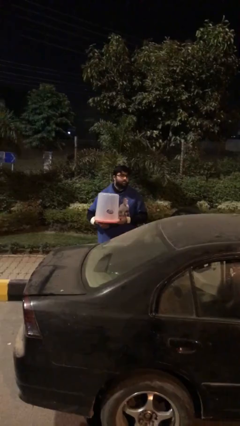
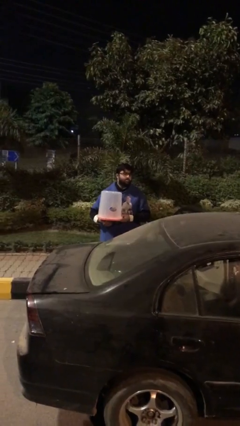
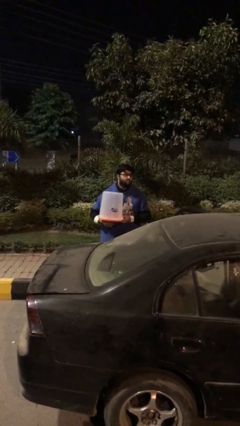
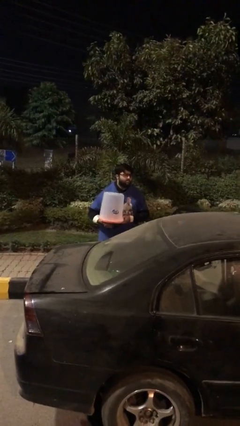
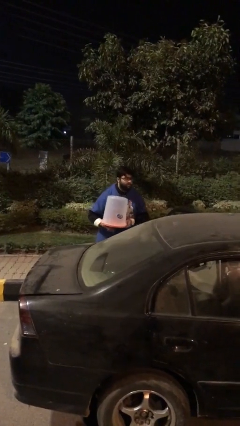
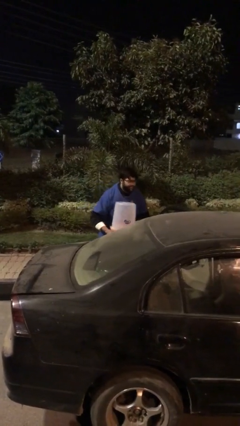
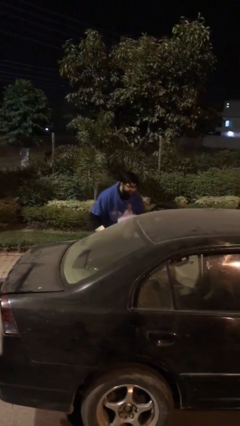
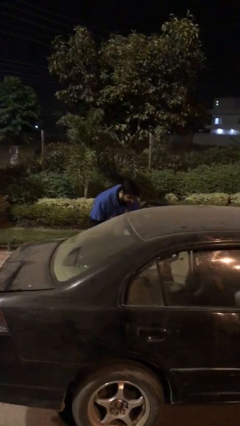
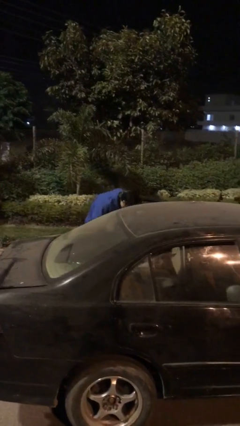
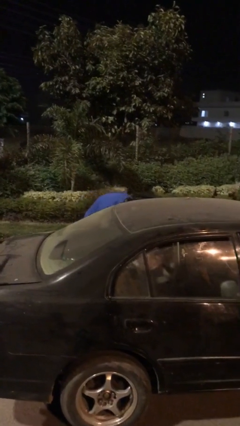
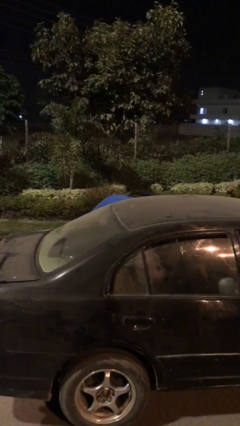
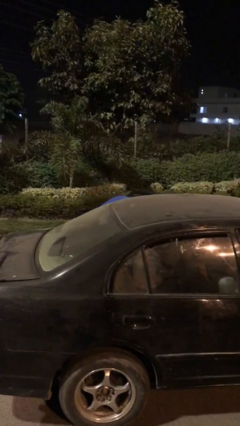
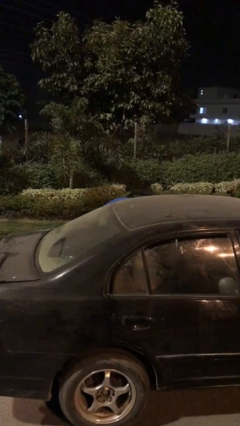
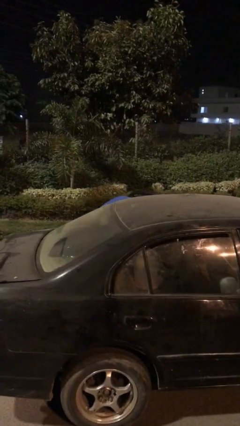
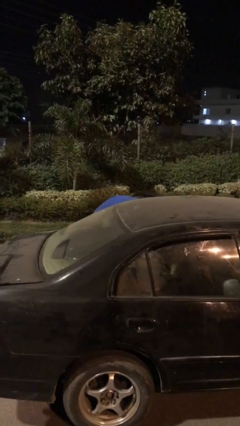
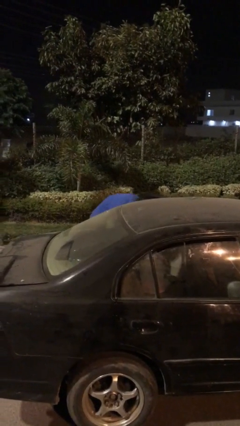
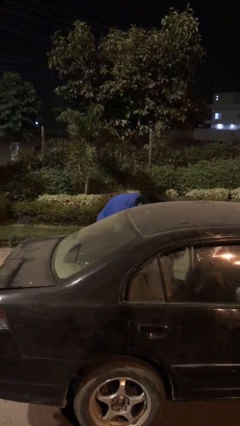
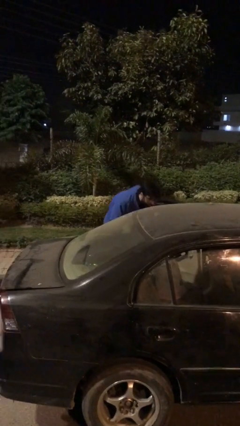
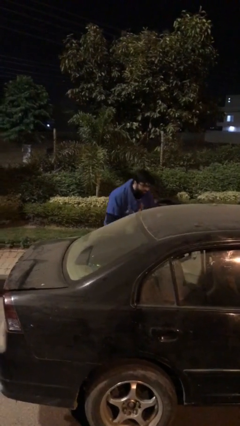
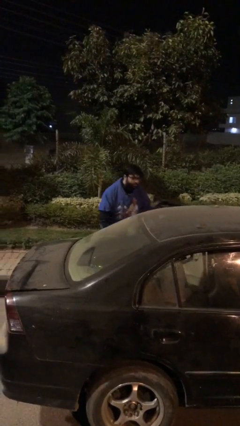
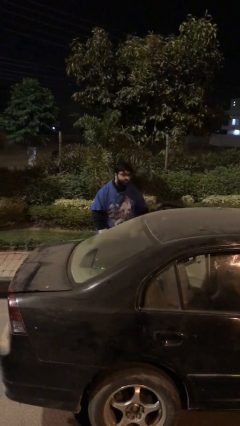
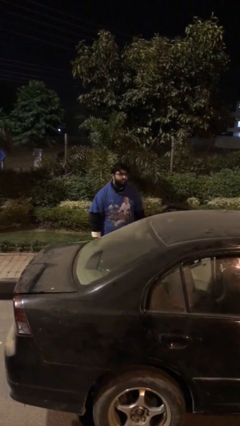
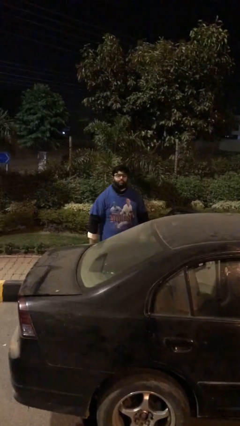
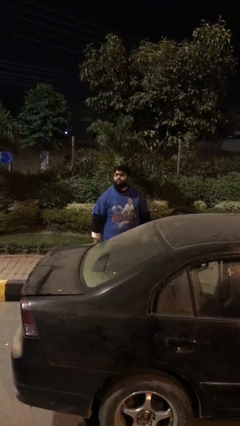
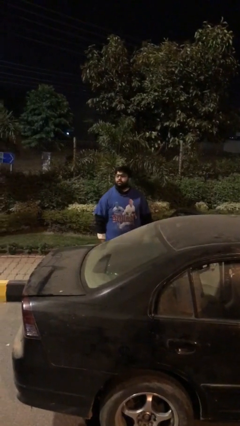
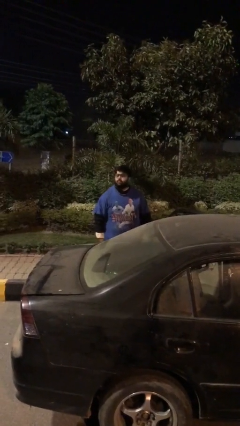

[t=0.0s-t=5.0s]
person loads car

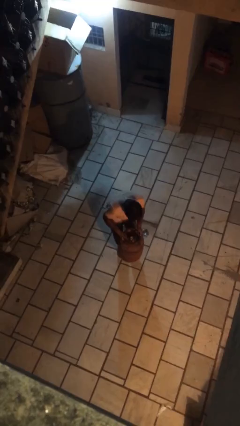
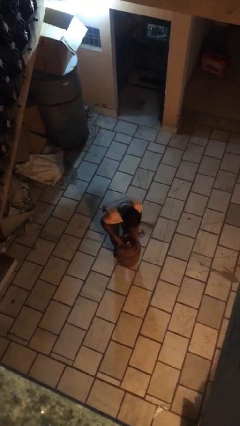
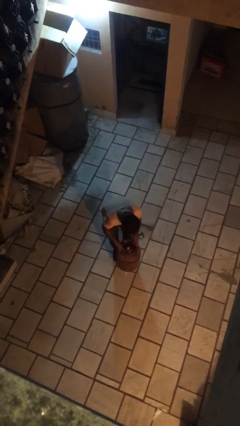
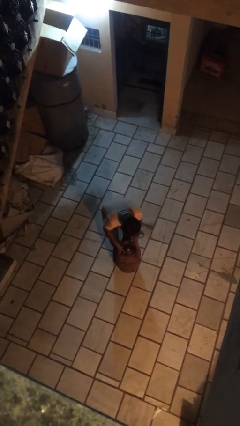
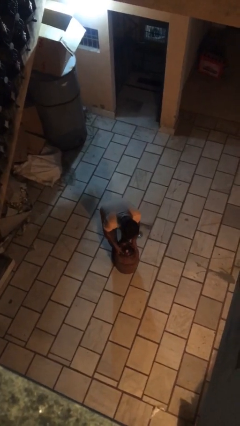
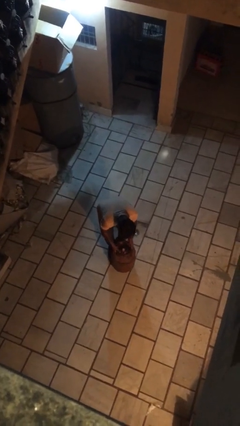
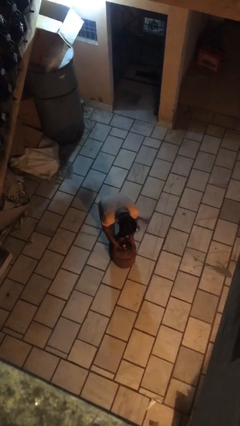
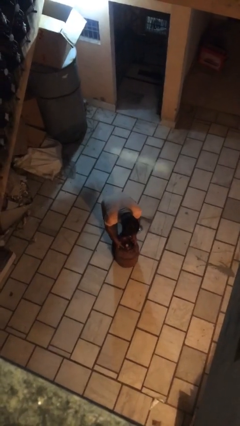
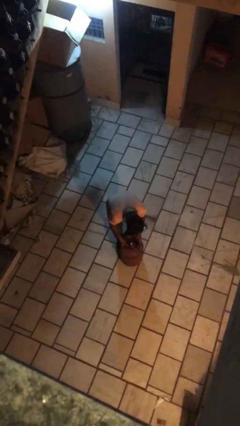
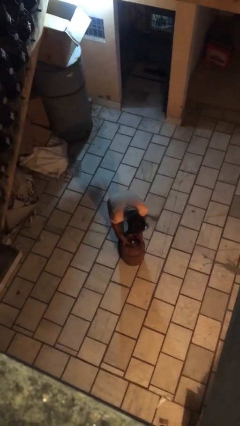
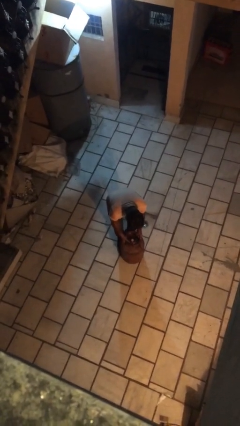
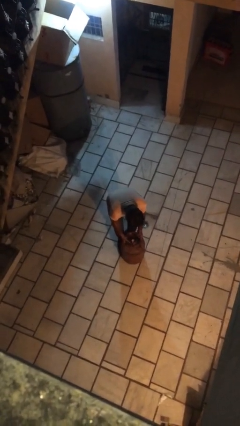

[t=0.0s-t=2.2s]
person puts down object on floor

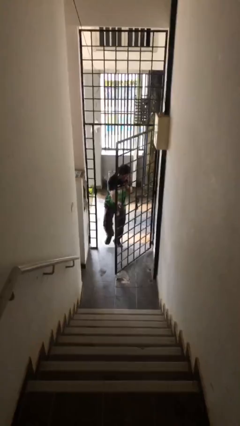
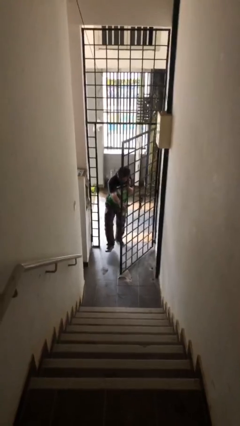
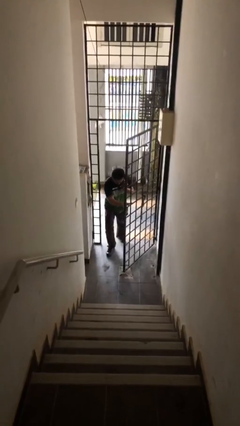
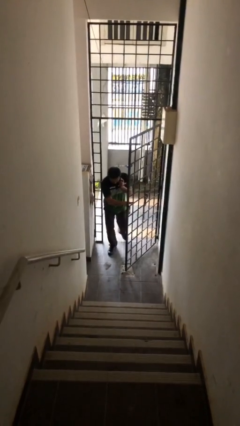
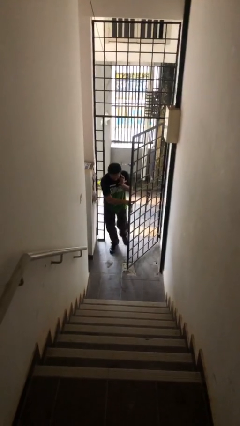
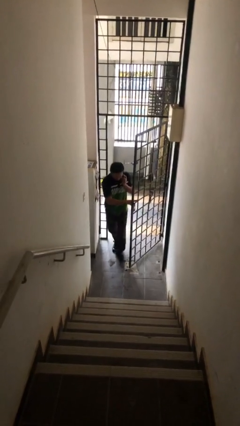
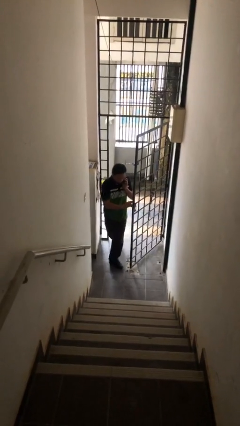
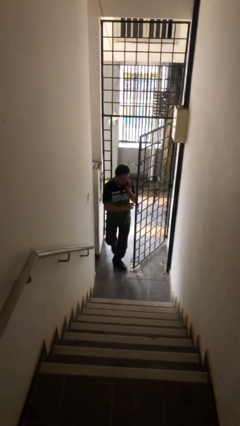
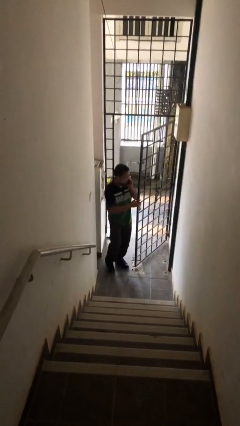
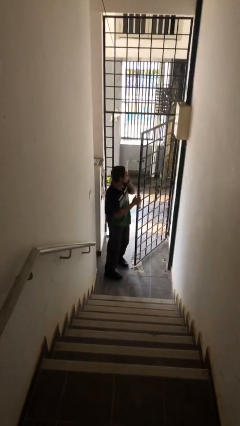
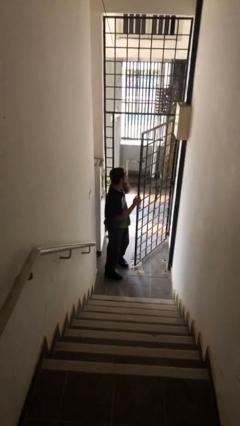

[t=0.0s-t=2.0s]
person enters scene through structure

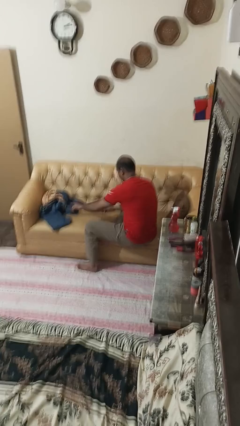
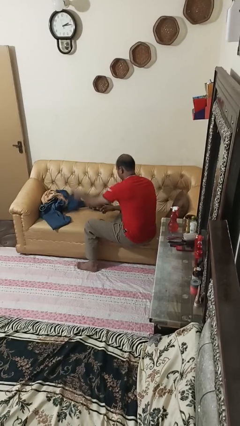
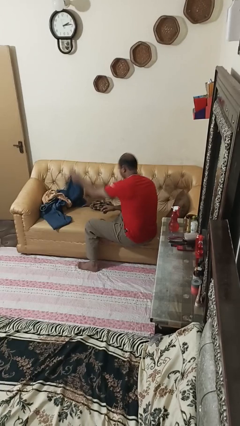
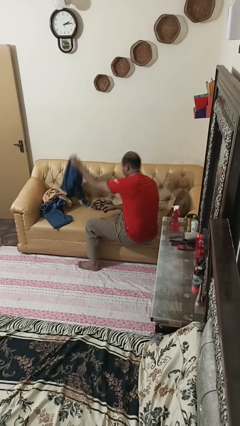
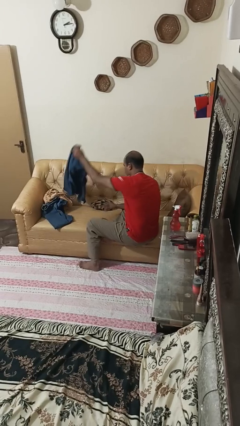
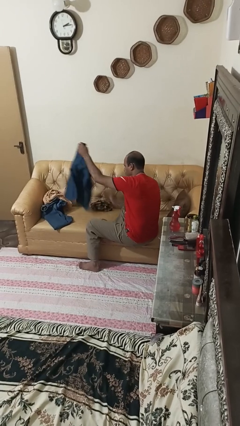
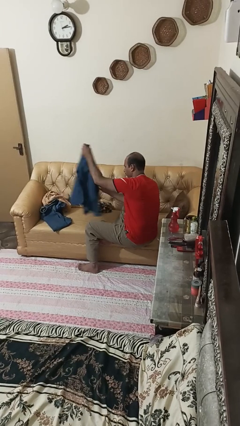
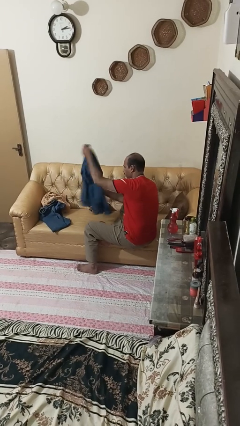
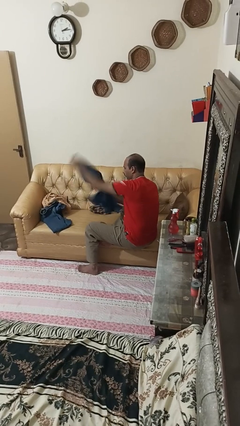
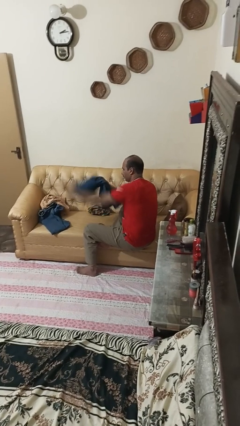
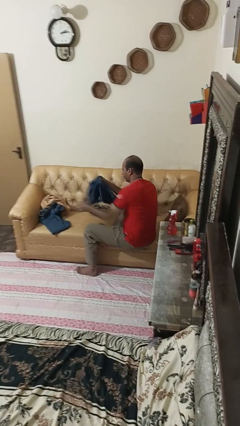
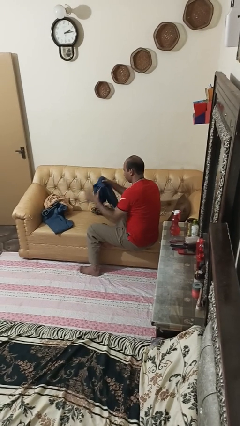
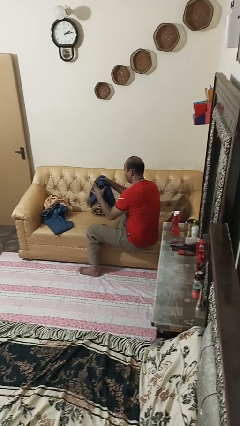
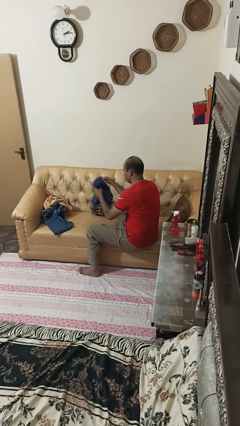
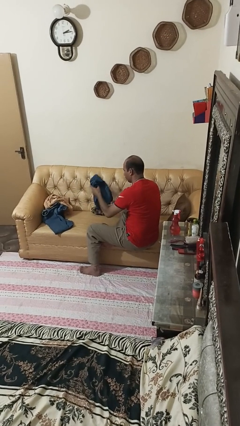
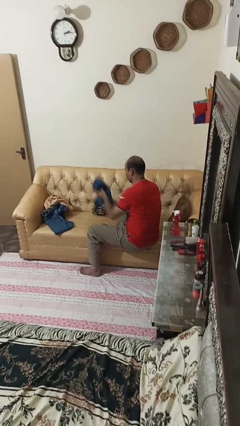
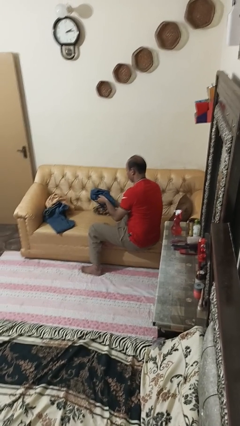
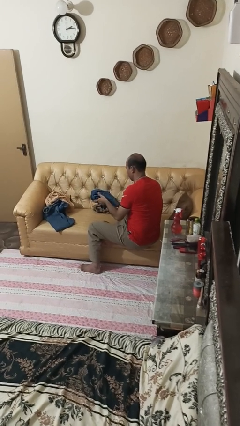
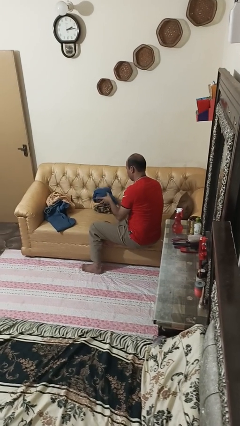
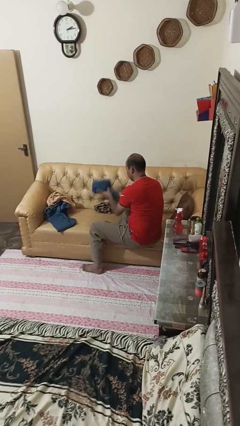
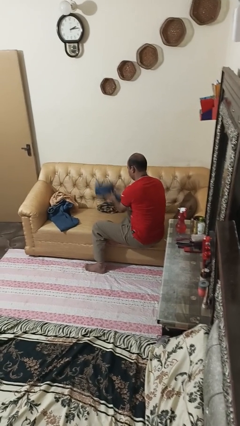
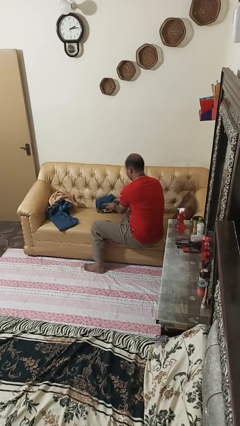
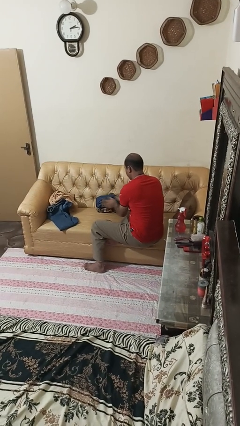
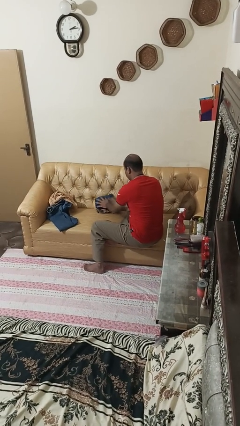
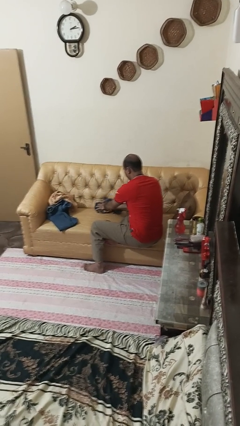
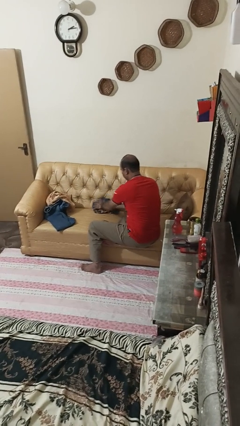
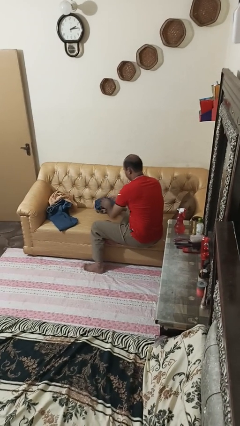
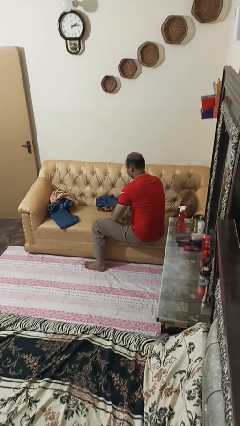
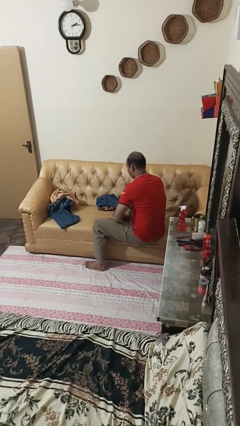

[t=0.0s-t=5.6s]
person folds shirt

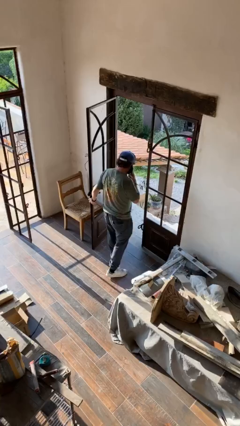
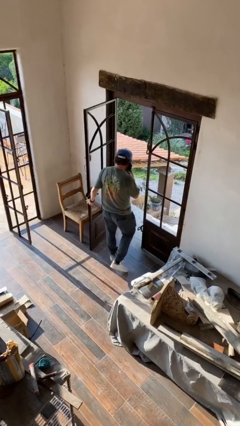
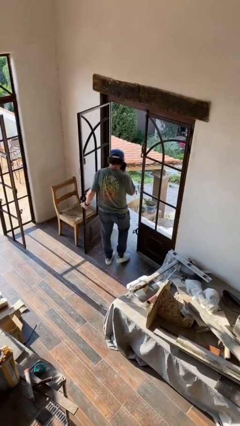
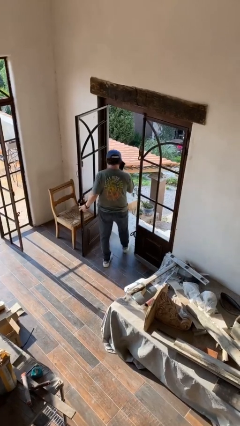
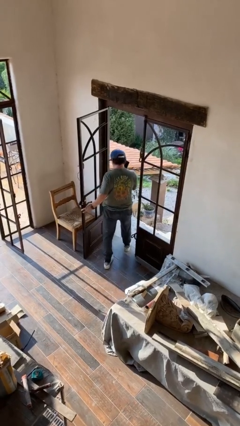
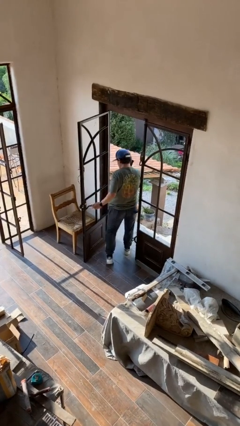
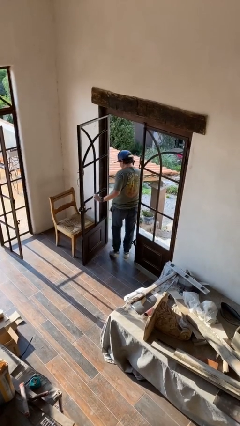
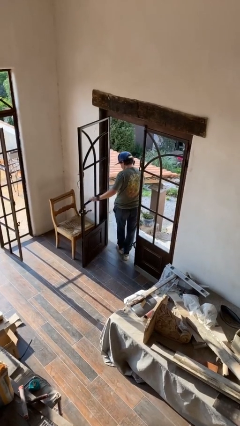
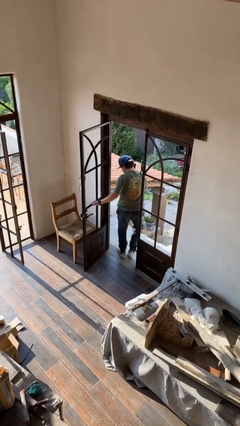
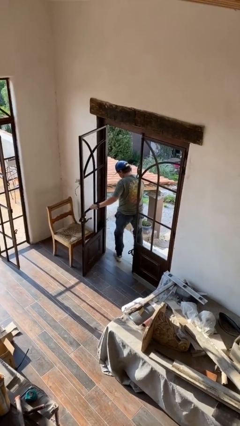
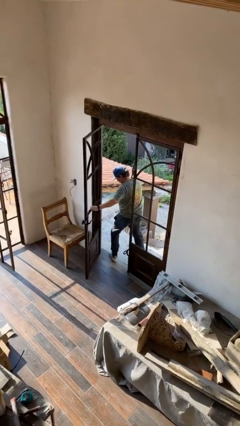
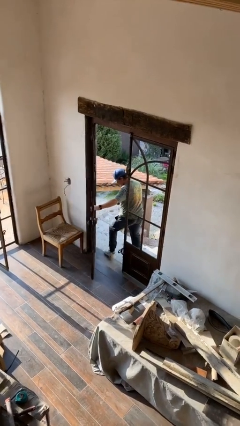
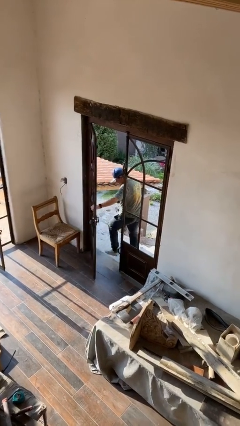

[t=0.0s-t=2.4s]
person exits scene through structure

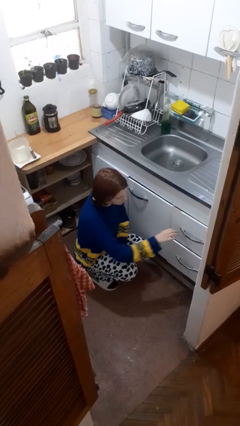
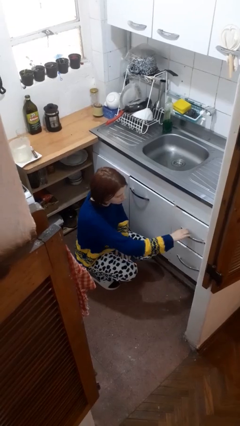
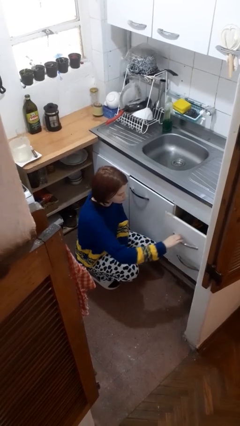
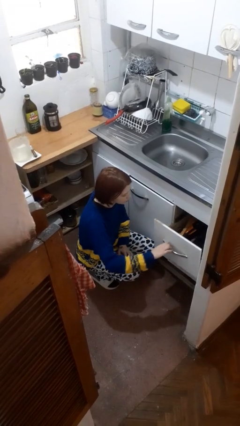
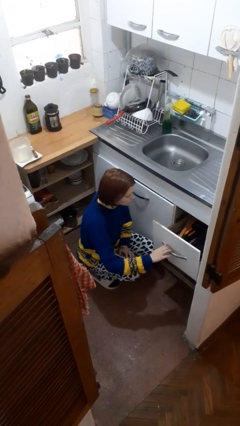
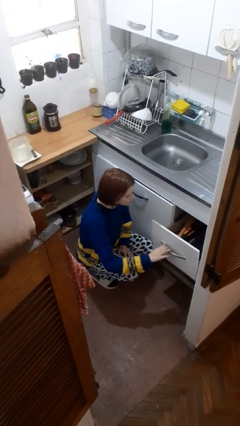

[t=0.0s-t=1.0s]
person opens kitchen drawer
